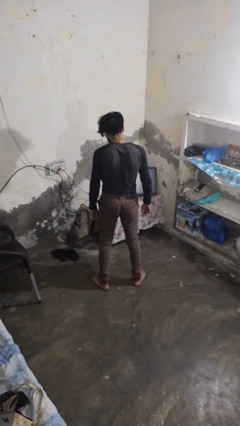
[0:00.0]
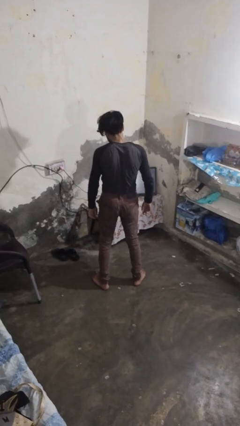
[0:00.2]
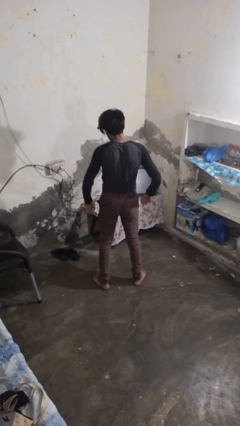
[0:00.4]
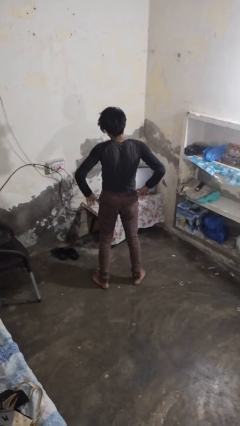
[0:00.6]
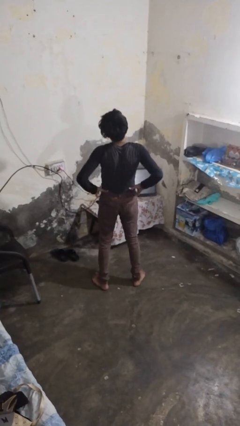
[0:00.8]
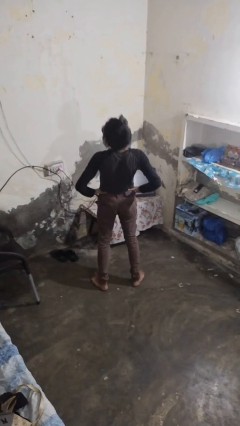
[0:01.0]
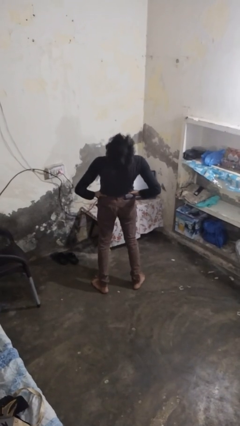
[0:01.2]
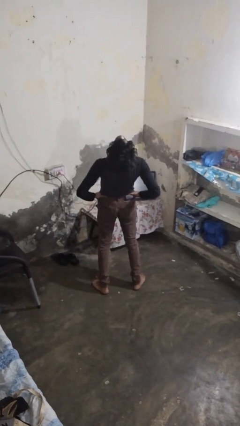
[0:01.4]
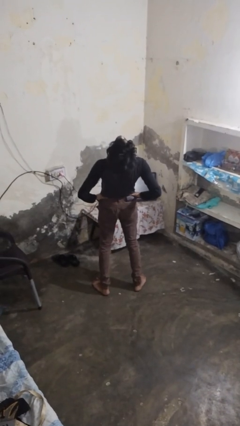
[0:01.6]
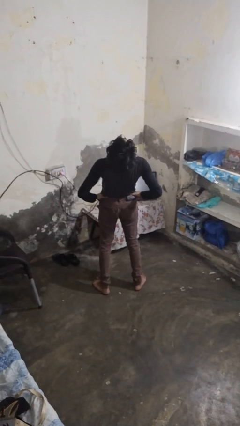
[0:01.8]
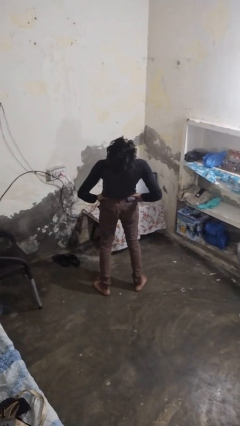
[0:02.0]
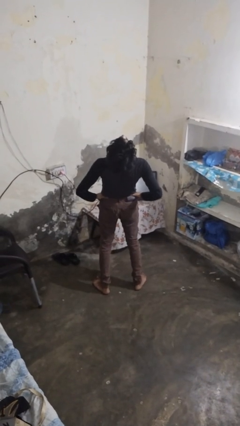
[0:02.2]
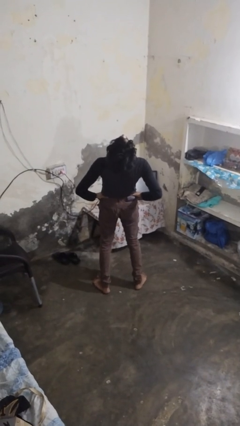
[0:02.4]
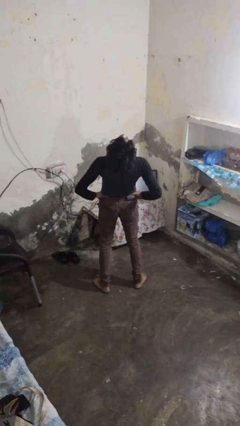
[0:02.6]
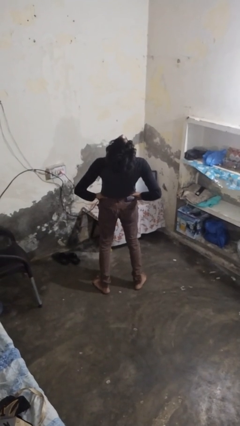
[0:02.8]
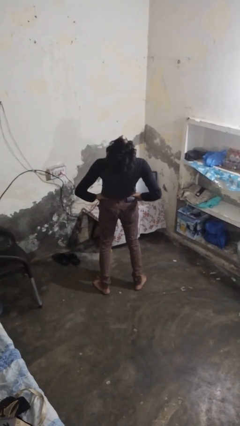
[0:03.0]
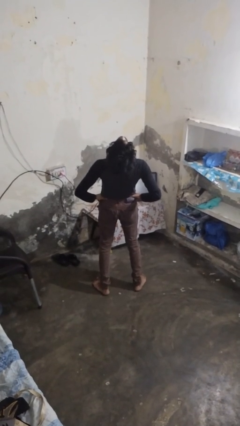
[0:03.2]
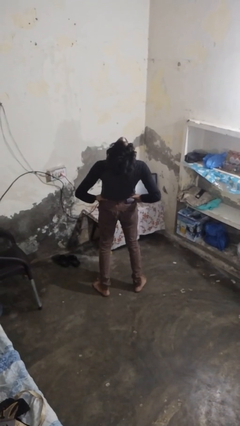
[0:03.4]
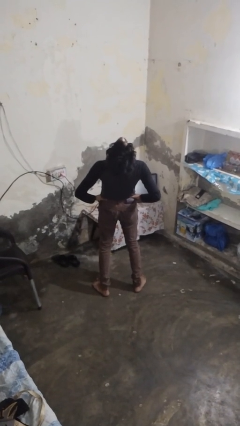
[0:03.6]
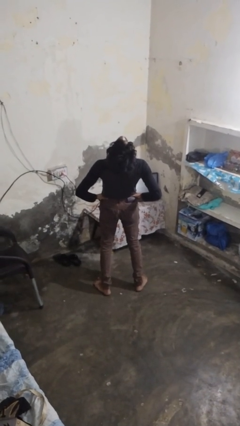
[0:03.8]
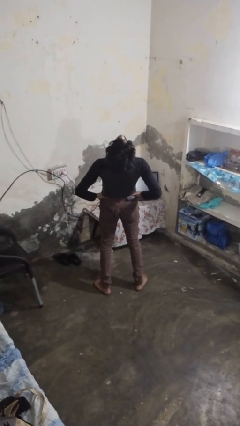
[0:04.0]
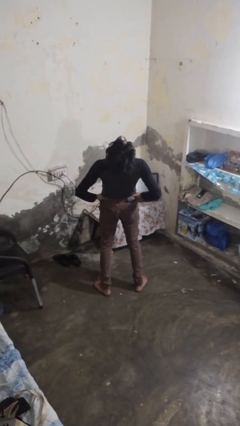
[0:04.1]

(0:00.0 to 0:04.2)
person stretches back

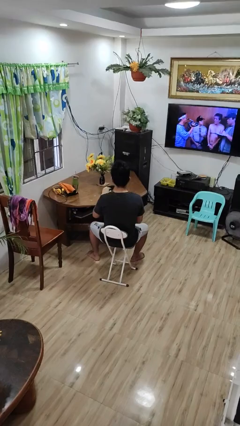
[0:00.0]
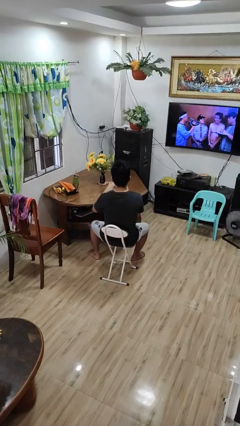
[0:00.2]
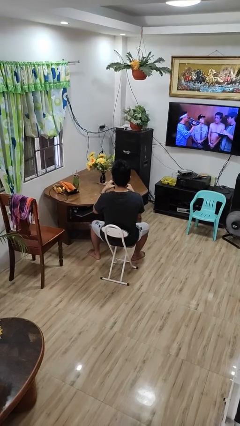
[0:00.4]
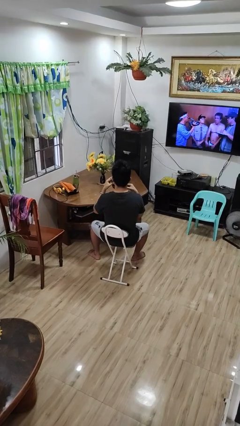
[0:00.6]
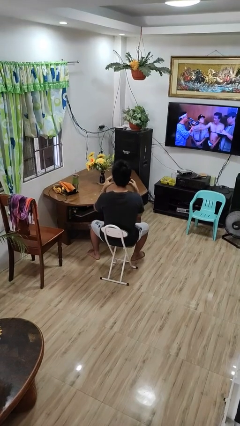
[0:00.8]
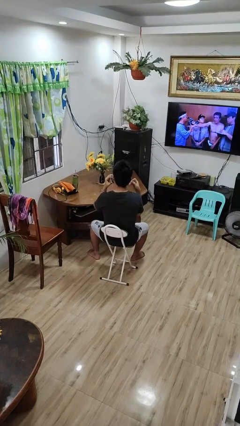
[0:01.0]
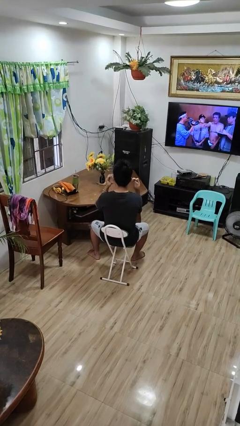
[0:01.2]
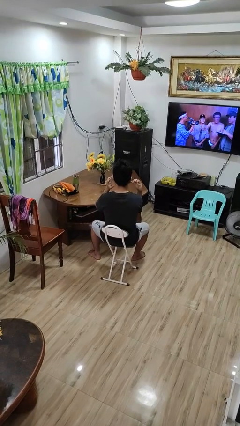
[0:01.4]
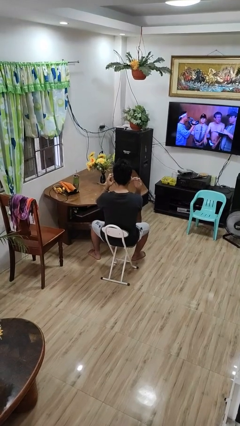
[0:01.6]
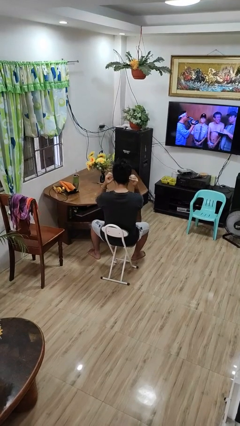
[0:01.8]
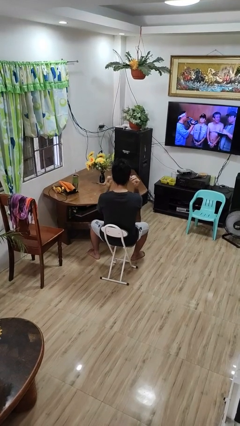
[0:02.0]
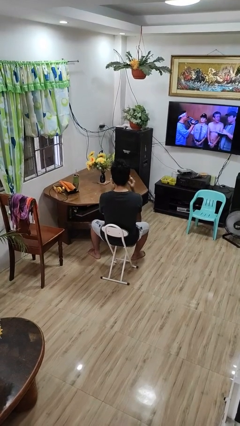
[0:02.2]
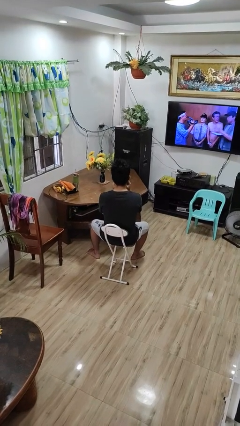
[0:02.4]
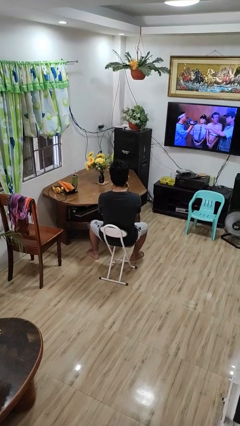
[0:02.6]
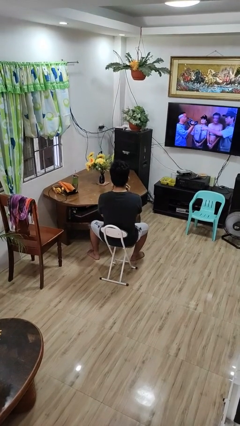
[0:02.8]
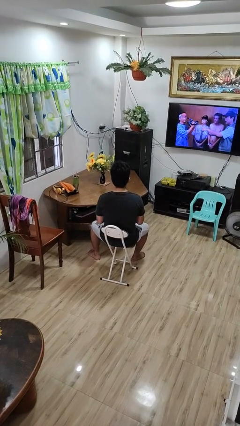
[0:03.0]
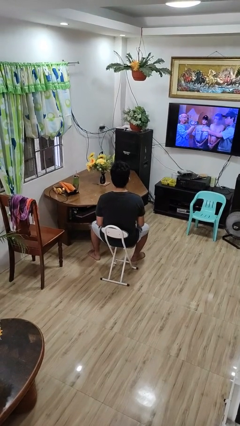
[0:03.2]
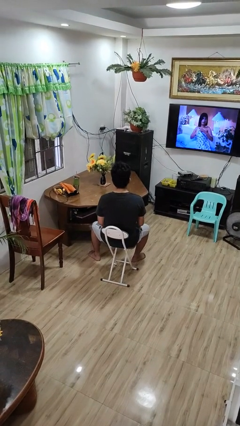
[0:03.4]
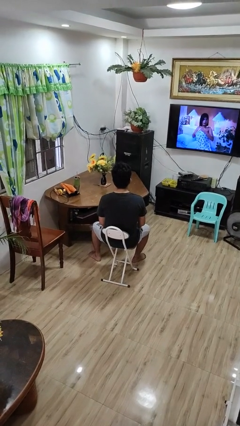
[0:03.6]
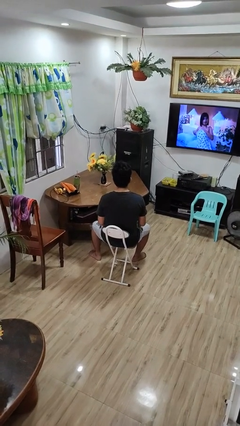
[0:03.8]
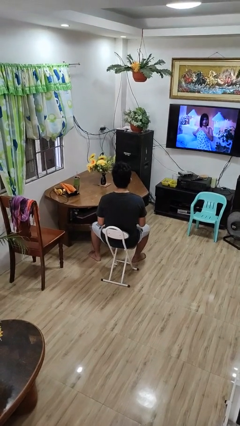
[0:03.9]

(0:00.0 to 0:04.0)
person puts on facemask

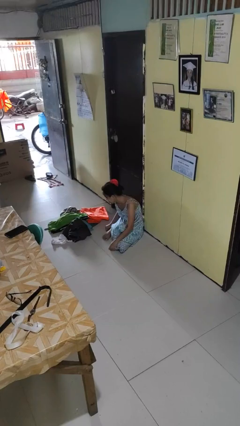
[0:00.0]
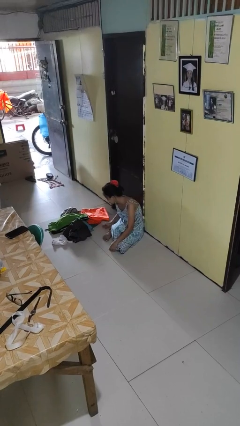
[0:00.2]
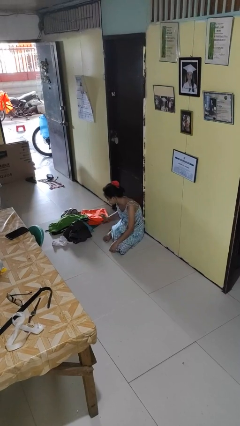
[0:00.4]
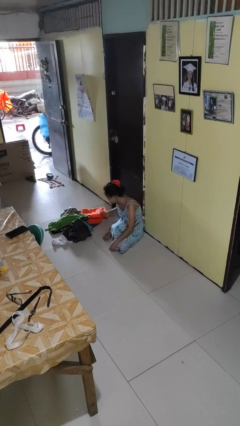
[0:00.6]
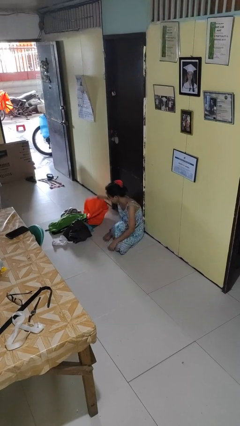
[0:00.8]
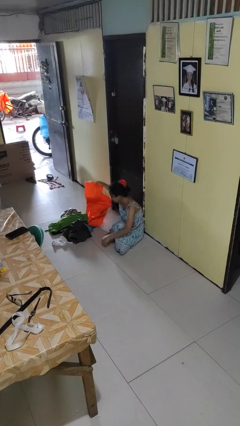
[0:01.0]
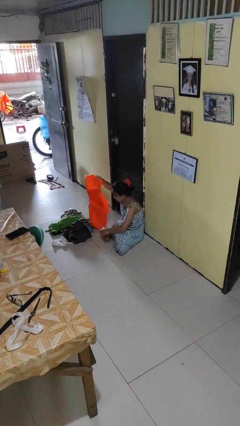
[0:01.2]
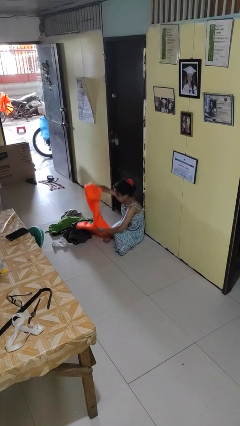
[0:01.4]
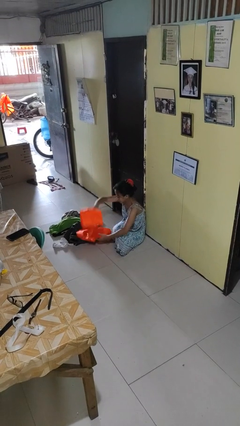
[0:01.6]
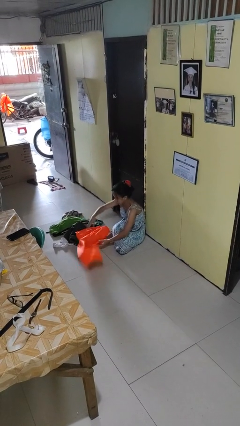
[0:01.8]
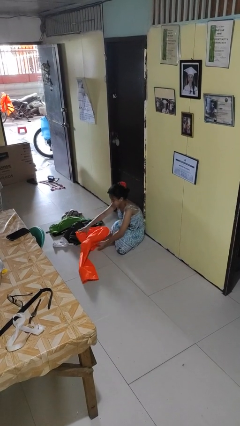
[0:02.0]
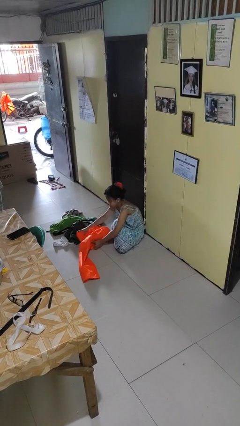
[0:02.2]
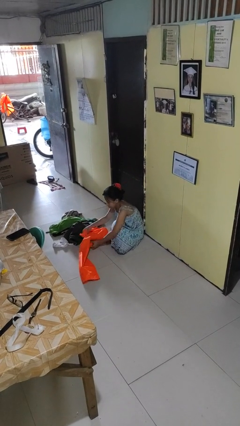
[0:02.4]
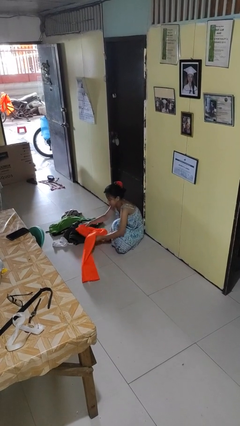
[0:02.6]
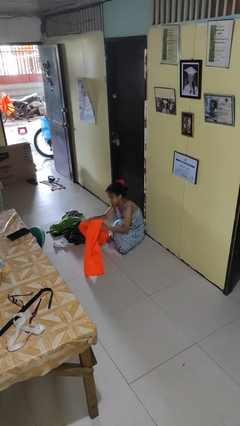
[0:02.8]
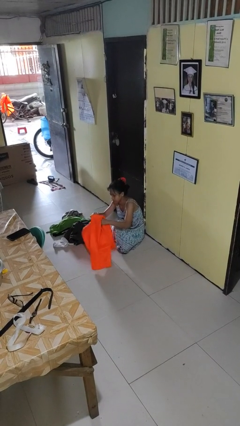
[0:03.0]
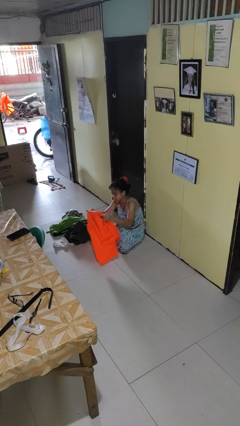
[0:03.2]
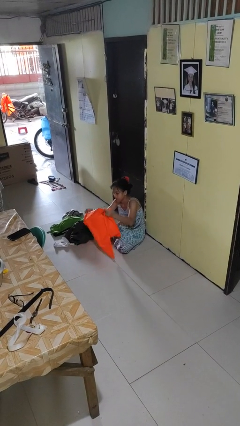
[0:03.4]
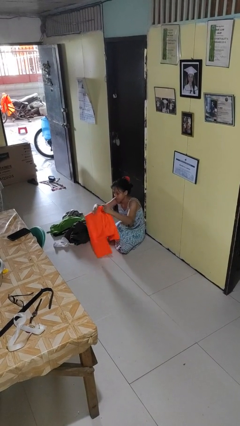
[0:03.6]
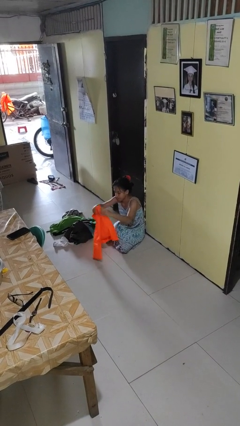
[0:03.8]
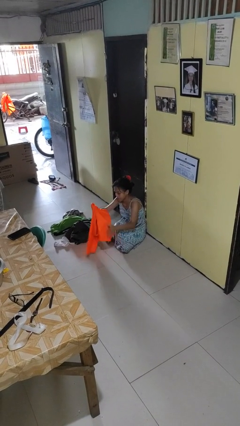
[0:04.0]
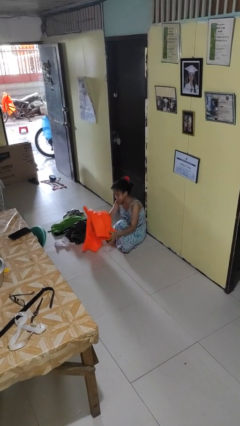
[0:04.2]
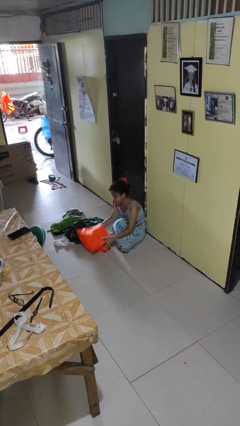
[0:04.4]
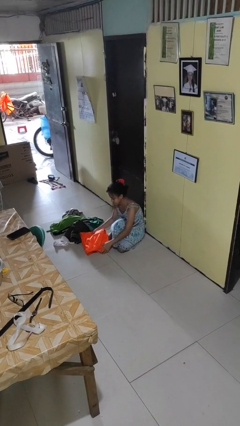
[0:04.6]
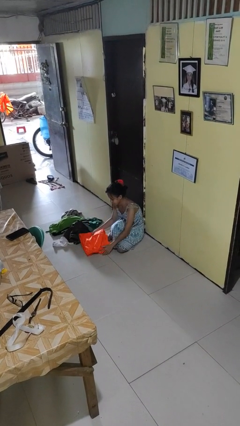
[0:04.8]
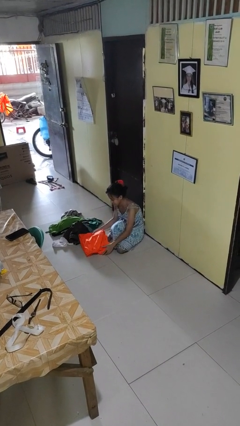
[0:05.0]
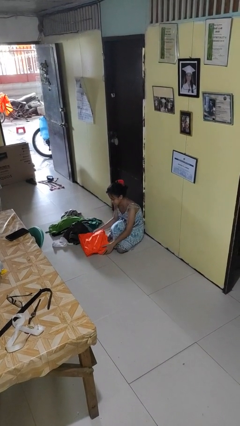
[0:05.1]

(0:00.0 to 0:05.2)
person folds pants

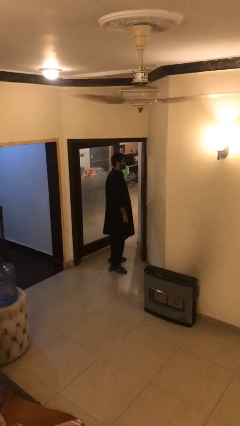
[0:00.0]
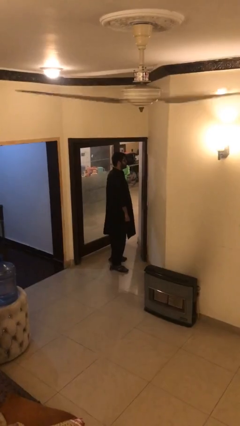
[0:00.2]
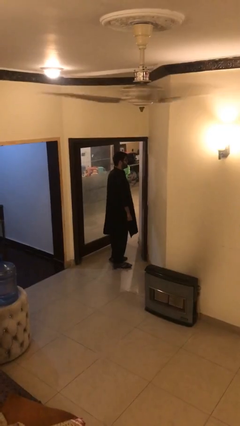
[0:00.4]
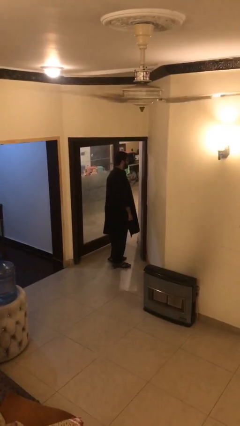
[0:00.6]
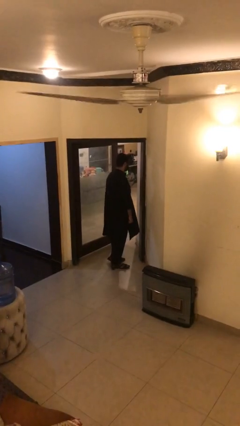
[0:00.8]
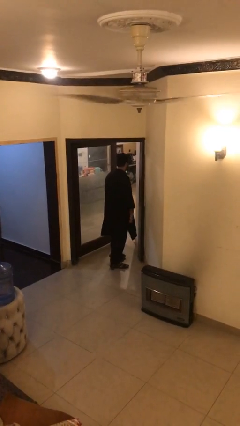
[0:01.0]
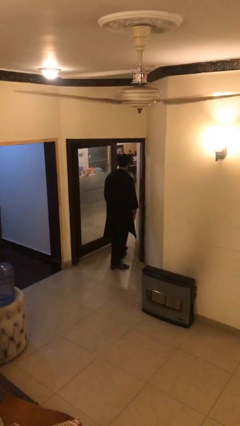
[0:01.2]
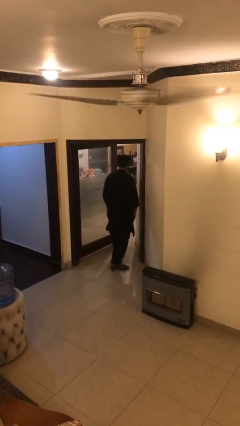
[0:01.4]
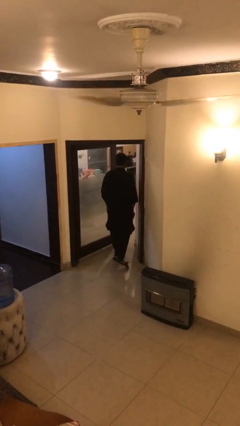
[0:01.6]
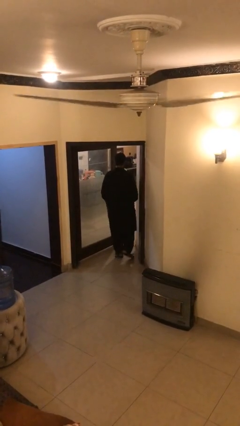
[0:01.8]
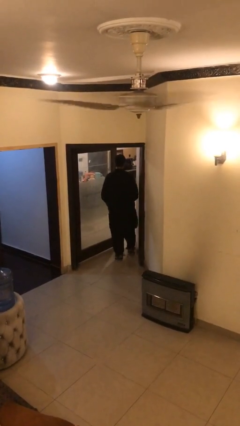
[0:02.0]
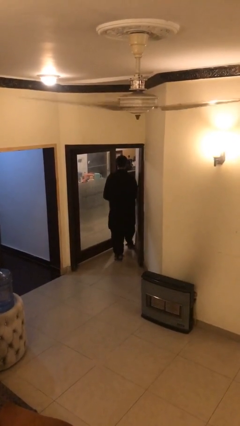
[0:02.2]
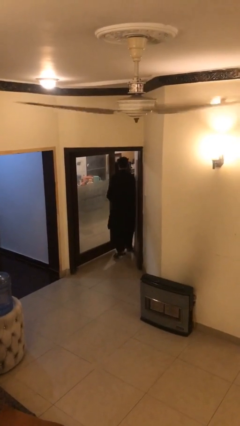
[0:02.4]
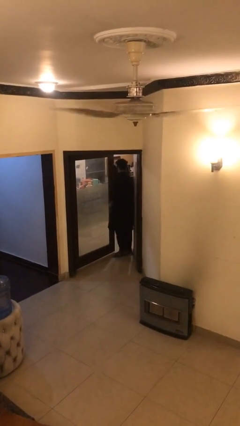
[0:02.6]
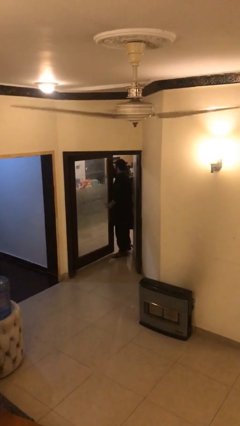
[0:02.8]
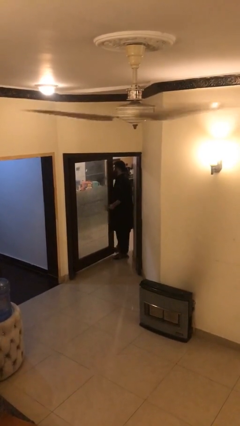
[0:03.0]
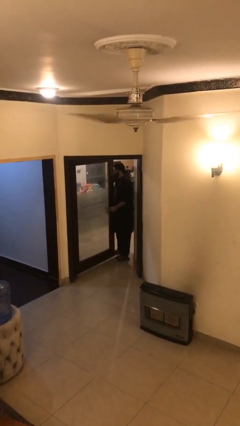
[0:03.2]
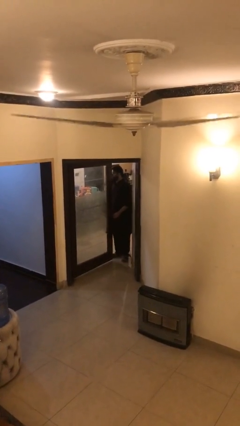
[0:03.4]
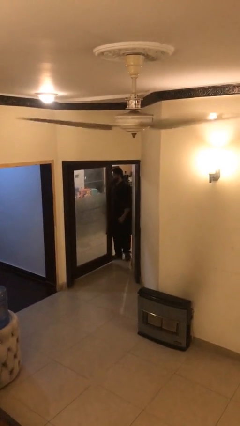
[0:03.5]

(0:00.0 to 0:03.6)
person exits scene through structure

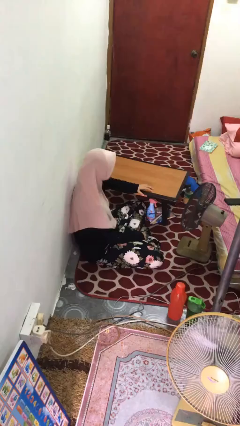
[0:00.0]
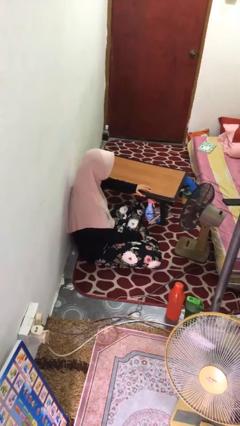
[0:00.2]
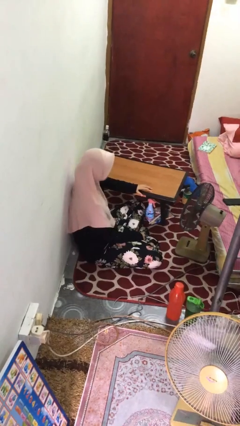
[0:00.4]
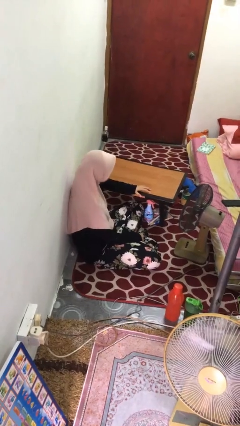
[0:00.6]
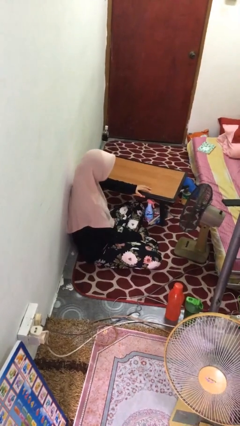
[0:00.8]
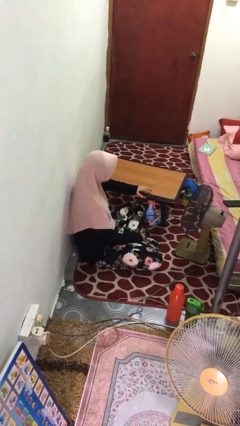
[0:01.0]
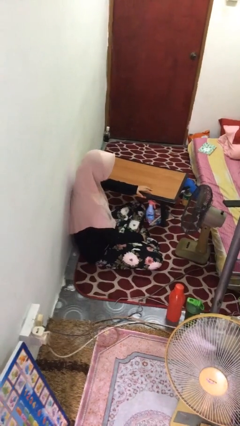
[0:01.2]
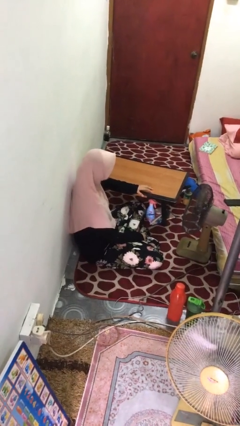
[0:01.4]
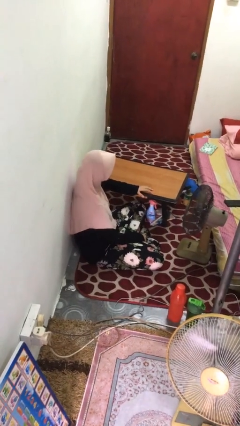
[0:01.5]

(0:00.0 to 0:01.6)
person nods head
